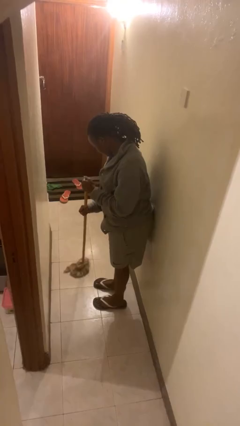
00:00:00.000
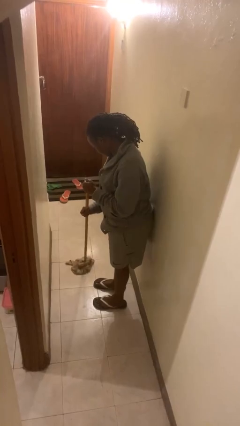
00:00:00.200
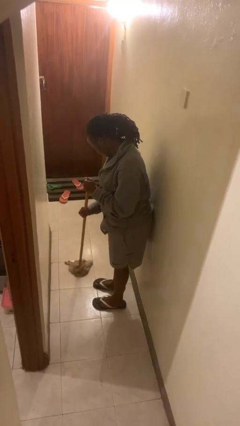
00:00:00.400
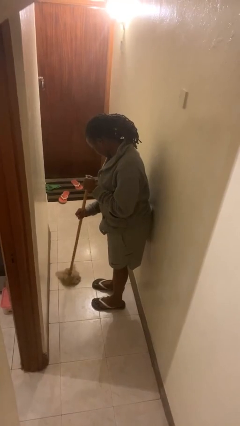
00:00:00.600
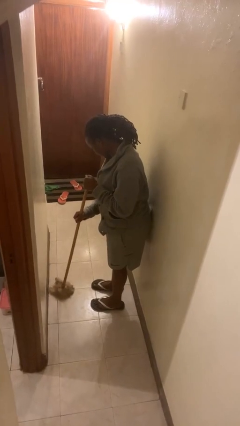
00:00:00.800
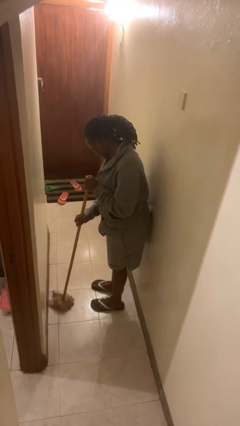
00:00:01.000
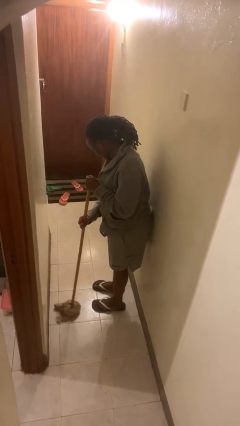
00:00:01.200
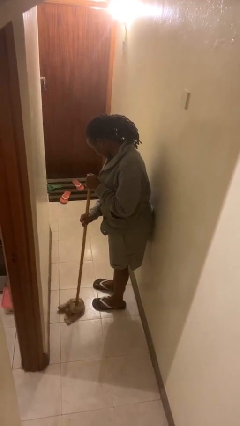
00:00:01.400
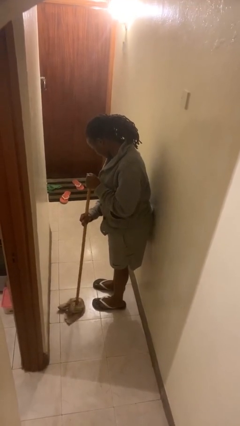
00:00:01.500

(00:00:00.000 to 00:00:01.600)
person mops

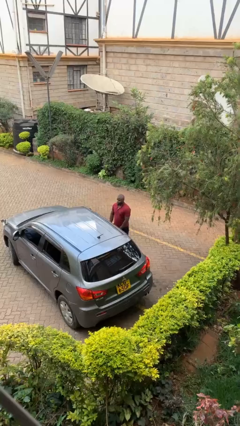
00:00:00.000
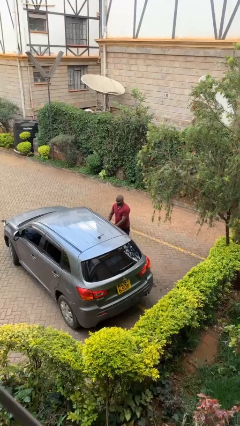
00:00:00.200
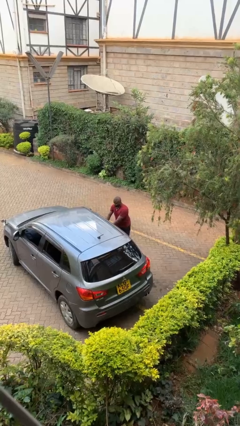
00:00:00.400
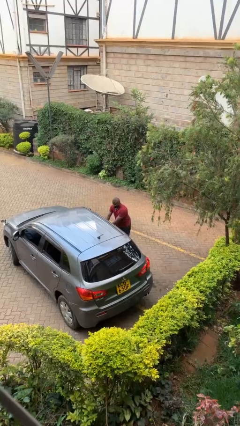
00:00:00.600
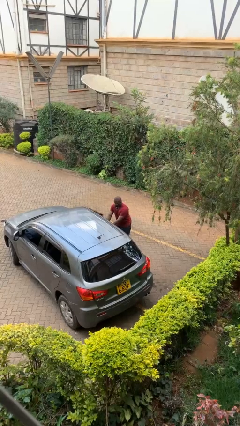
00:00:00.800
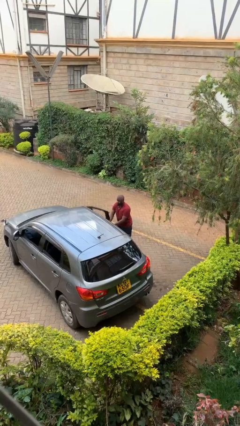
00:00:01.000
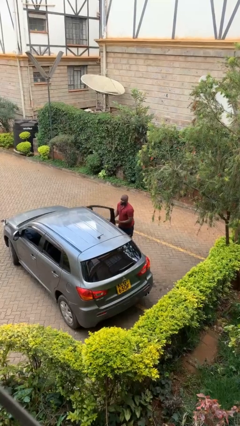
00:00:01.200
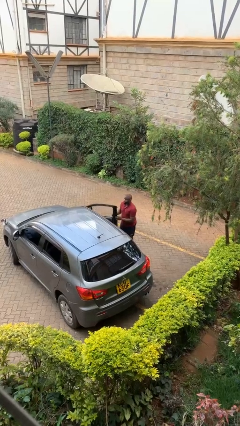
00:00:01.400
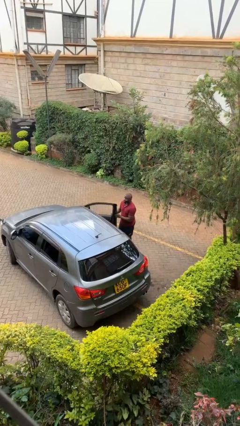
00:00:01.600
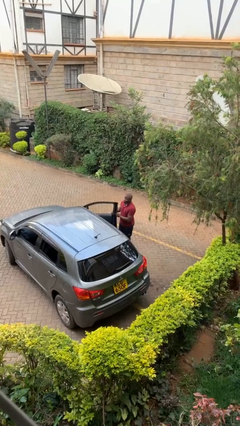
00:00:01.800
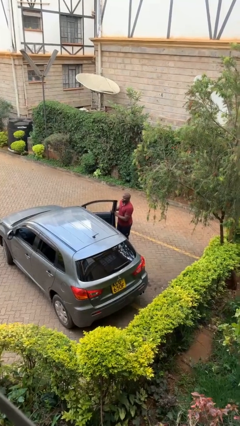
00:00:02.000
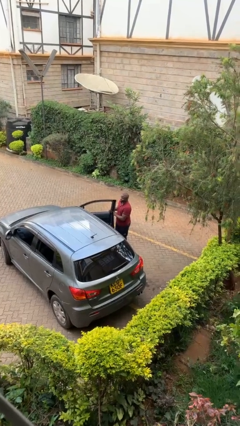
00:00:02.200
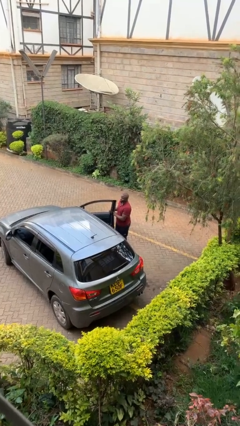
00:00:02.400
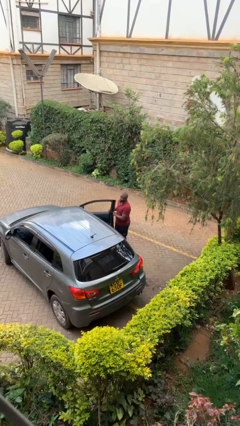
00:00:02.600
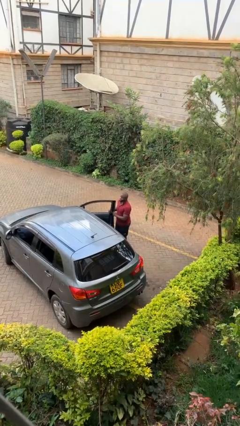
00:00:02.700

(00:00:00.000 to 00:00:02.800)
person opens car door

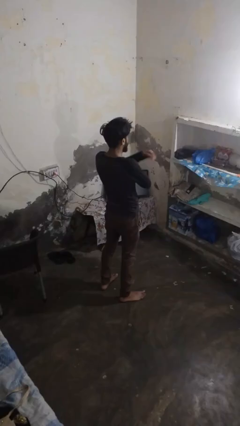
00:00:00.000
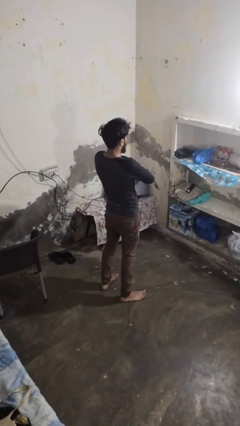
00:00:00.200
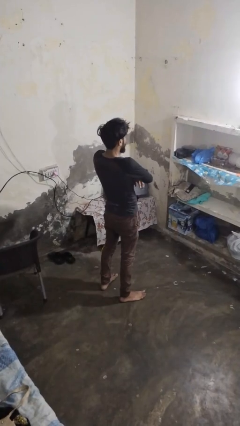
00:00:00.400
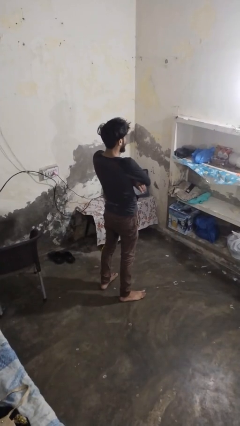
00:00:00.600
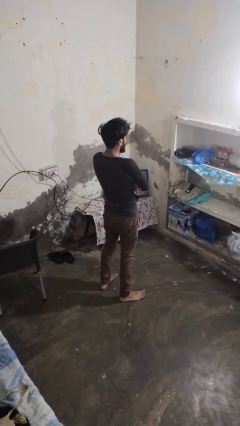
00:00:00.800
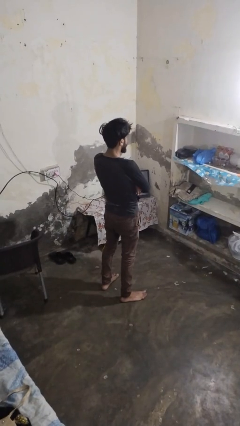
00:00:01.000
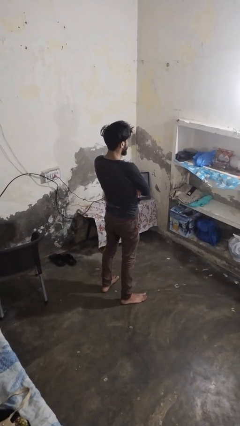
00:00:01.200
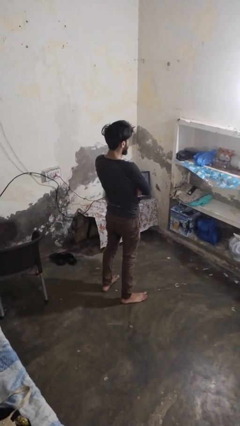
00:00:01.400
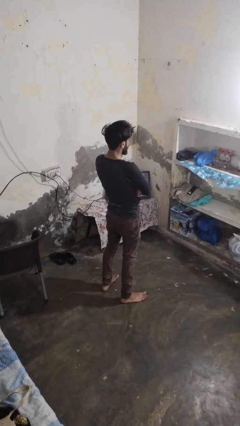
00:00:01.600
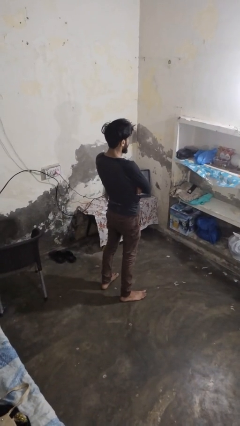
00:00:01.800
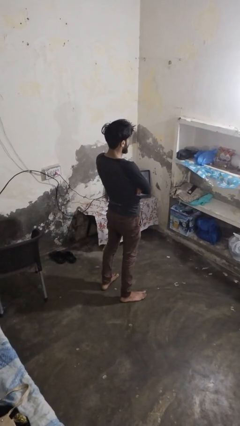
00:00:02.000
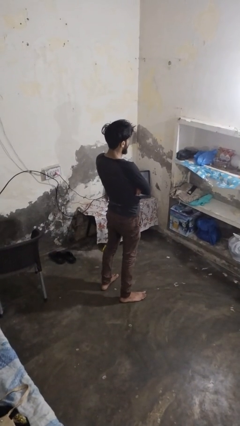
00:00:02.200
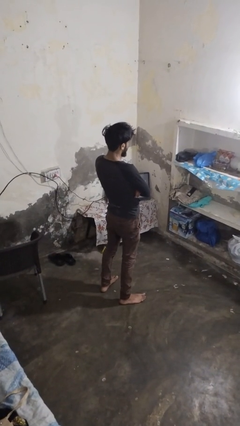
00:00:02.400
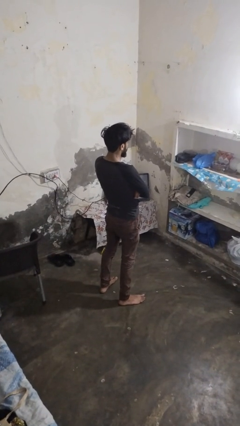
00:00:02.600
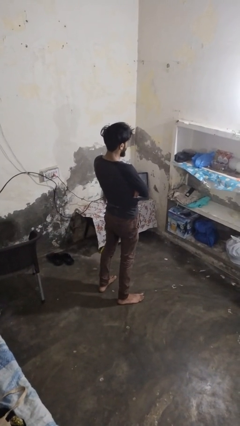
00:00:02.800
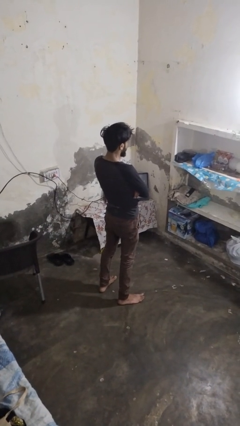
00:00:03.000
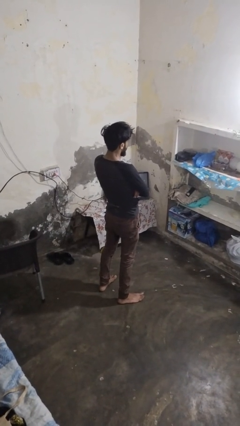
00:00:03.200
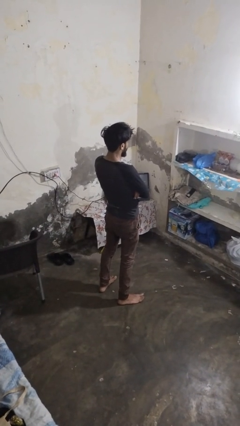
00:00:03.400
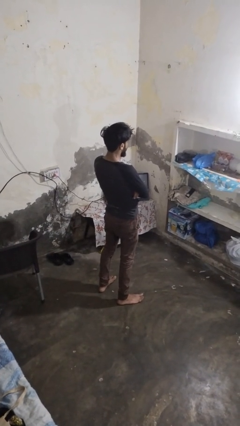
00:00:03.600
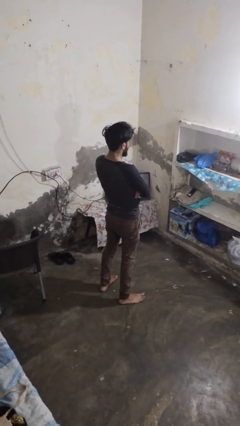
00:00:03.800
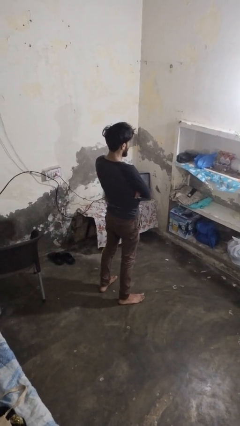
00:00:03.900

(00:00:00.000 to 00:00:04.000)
person crosses arms

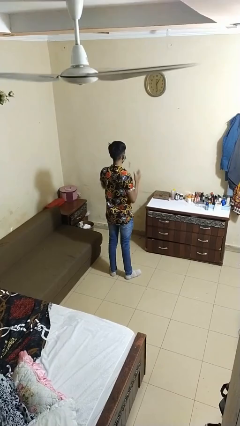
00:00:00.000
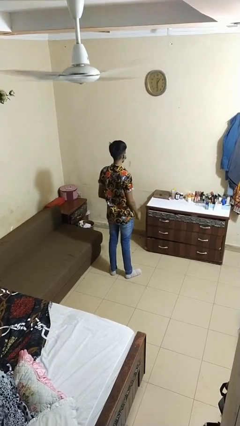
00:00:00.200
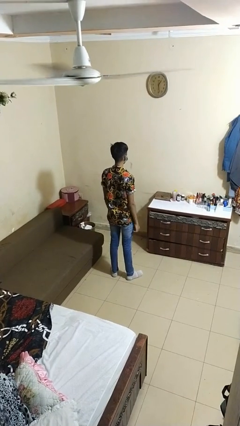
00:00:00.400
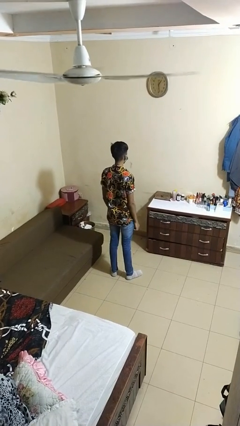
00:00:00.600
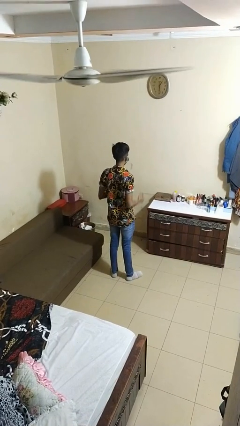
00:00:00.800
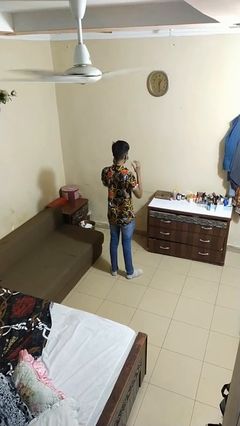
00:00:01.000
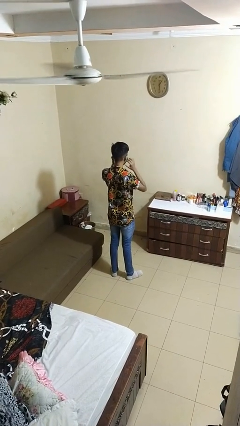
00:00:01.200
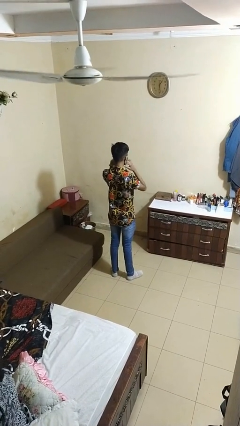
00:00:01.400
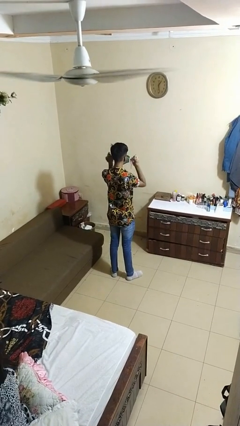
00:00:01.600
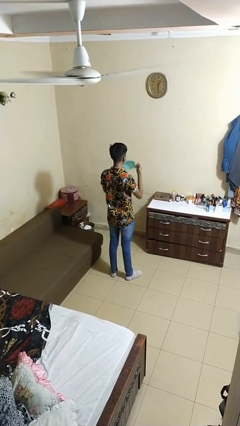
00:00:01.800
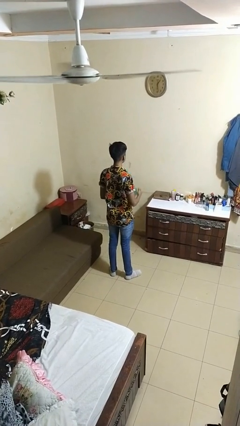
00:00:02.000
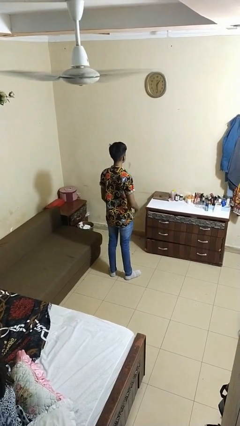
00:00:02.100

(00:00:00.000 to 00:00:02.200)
person takes off facemask

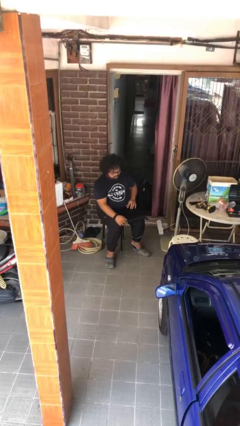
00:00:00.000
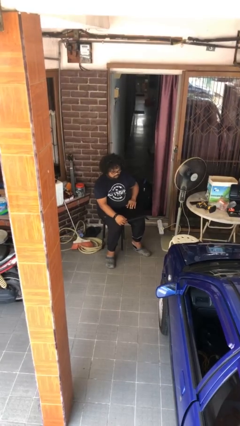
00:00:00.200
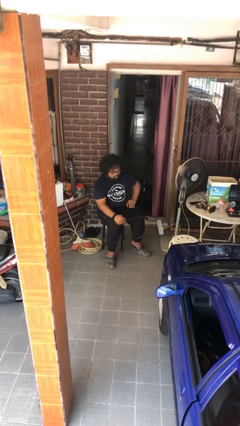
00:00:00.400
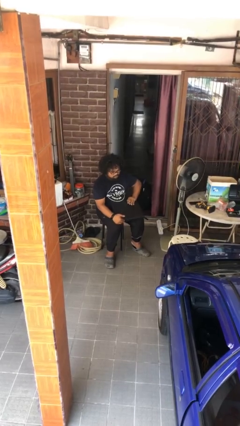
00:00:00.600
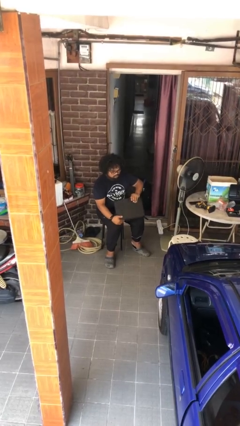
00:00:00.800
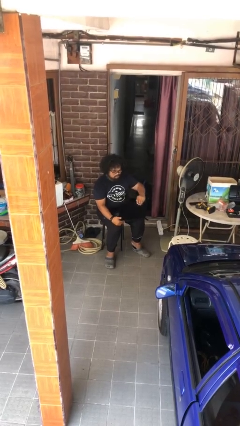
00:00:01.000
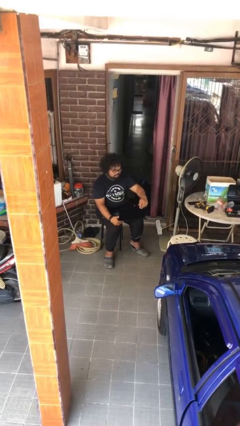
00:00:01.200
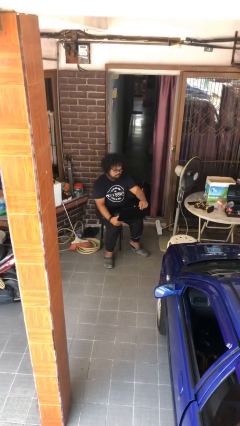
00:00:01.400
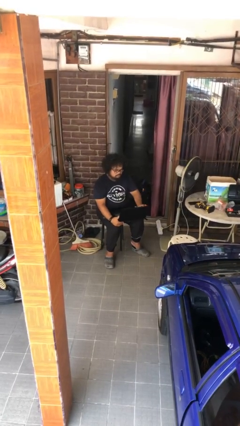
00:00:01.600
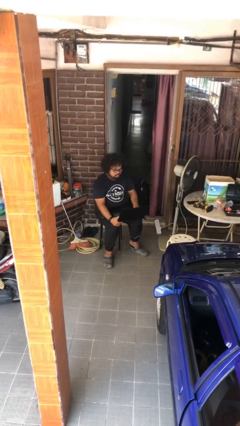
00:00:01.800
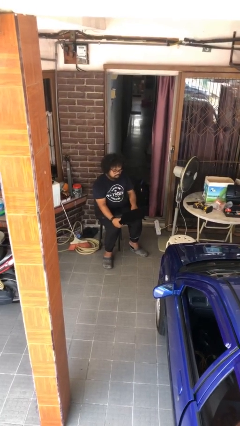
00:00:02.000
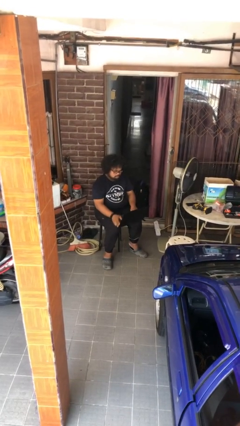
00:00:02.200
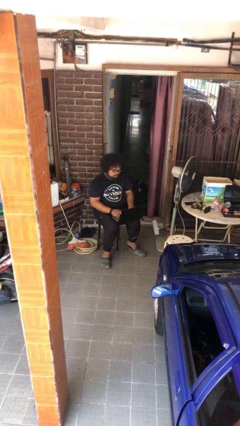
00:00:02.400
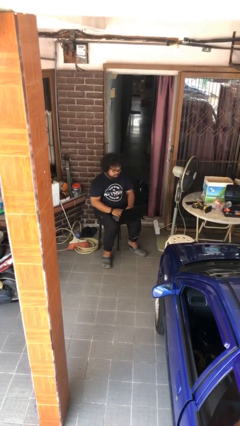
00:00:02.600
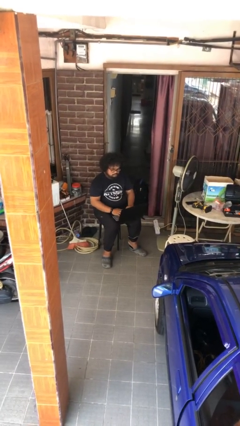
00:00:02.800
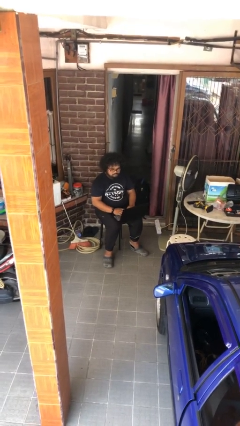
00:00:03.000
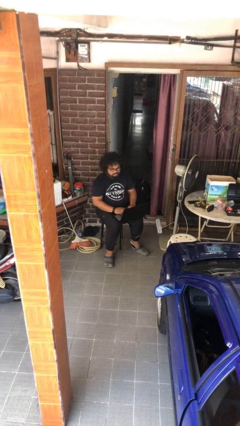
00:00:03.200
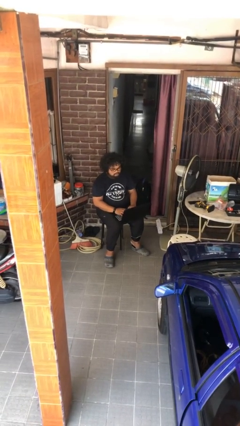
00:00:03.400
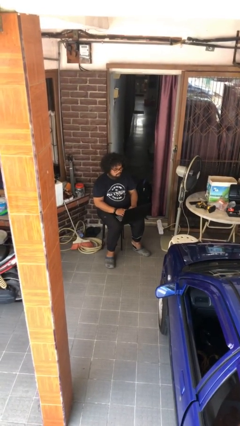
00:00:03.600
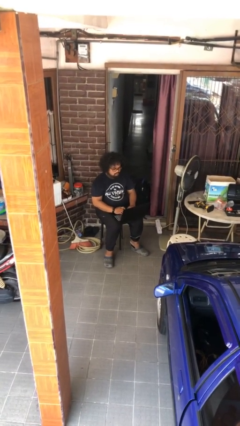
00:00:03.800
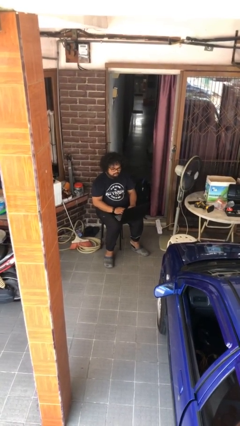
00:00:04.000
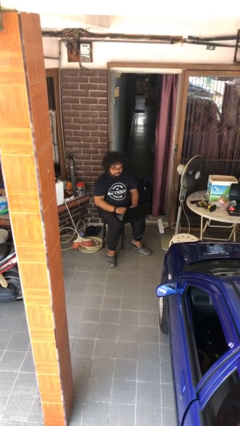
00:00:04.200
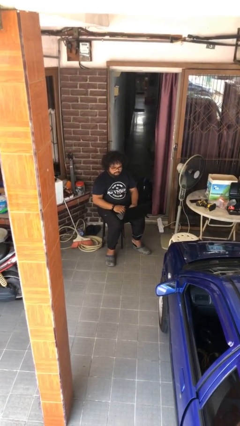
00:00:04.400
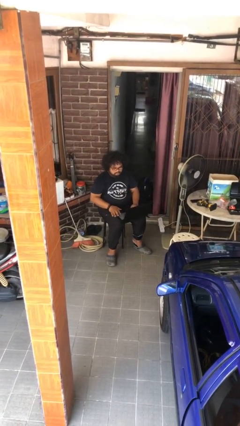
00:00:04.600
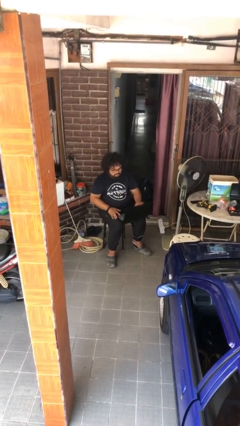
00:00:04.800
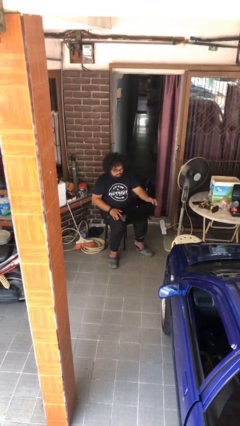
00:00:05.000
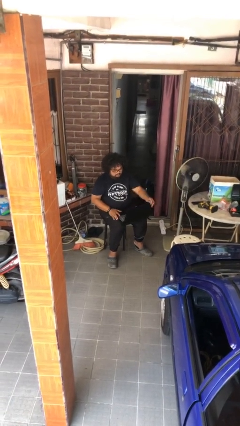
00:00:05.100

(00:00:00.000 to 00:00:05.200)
person interacts with laptop

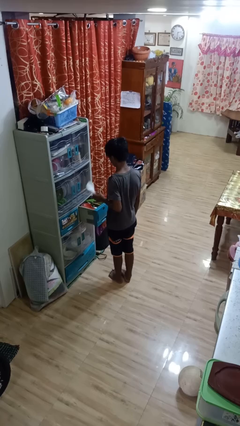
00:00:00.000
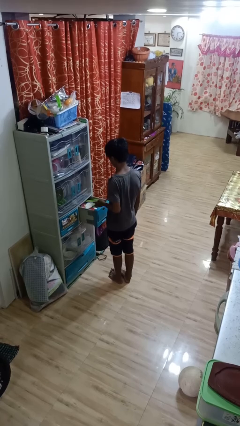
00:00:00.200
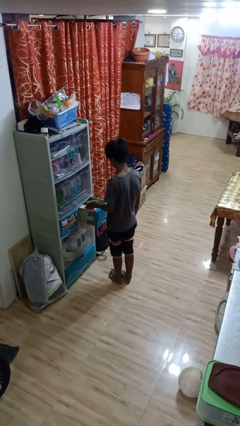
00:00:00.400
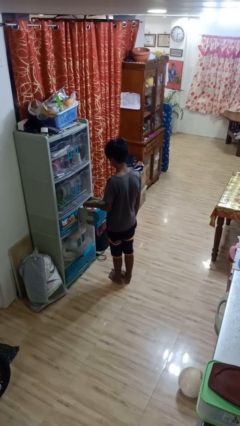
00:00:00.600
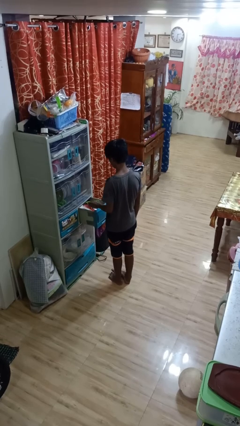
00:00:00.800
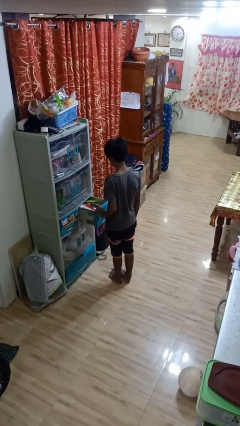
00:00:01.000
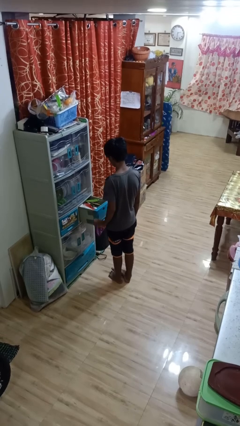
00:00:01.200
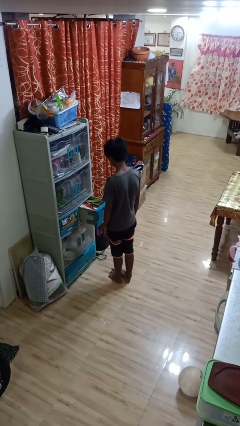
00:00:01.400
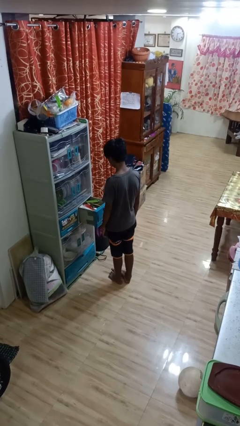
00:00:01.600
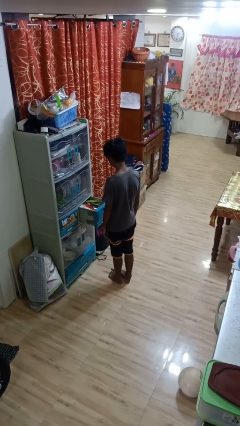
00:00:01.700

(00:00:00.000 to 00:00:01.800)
person puts object into kitchen drawer
